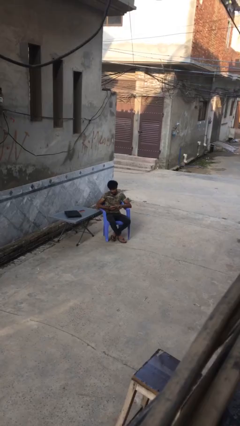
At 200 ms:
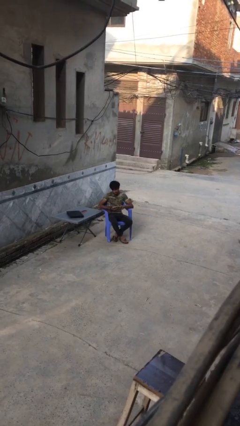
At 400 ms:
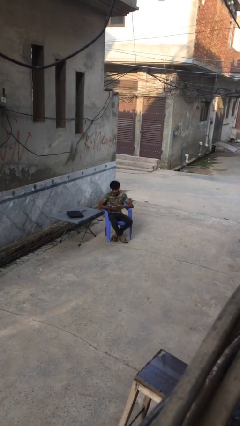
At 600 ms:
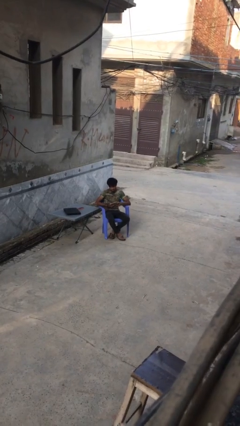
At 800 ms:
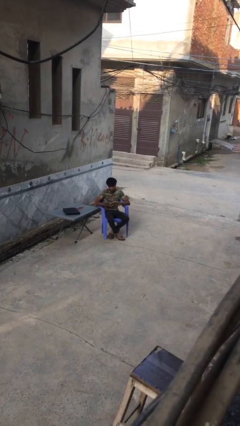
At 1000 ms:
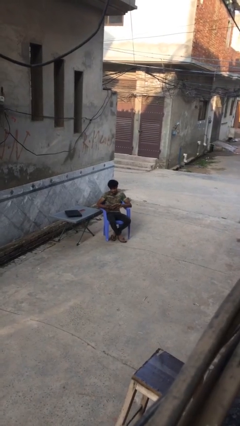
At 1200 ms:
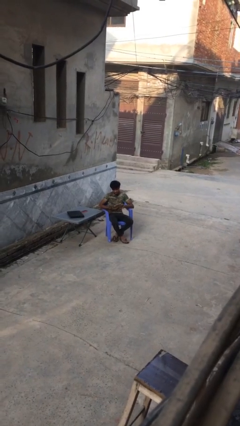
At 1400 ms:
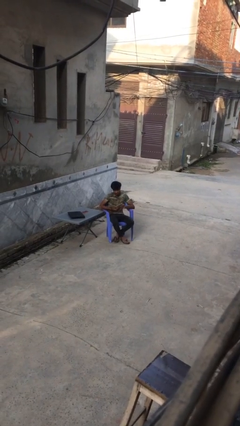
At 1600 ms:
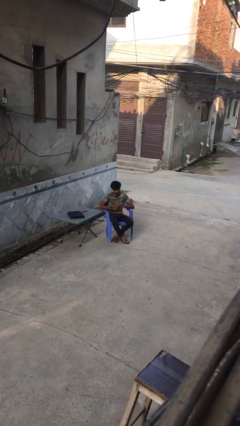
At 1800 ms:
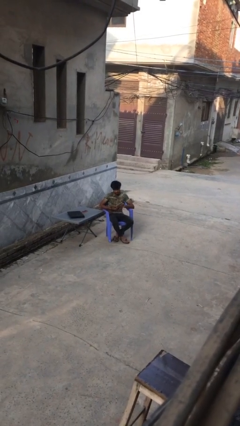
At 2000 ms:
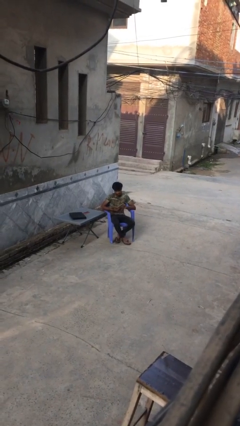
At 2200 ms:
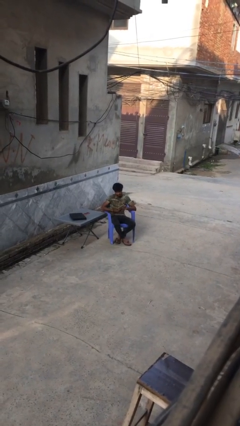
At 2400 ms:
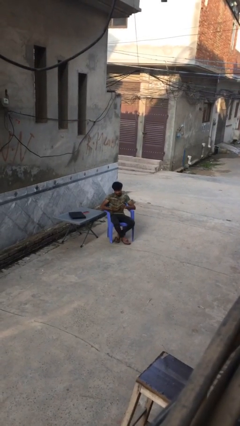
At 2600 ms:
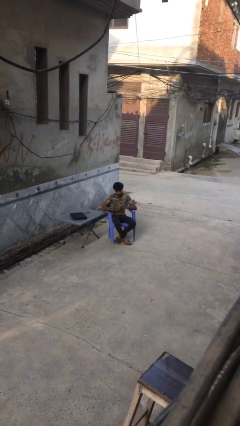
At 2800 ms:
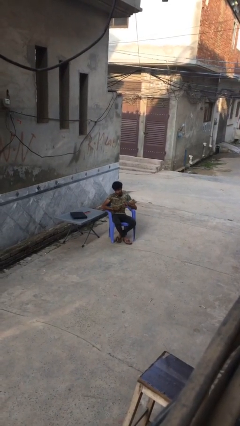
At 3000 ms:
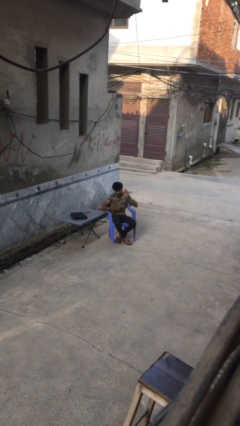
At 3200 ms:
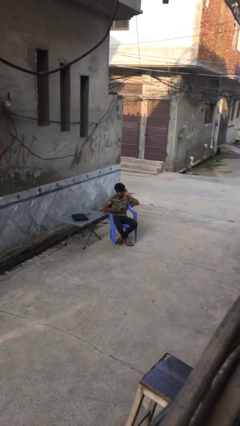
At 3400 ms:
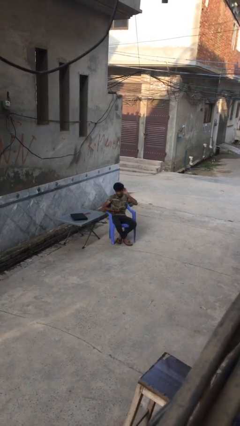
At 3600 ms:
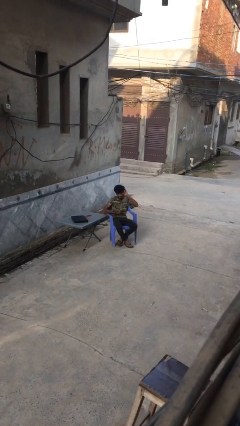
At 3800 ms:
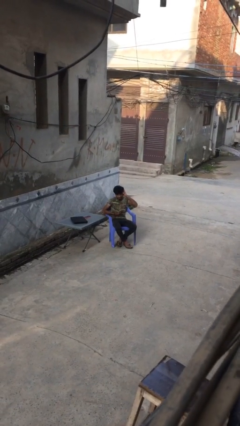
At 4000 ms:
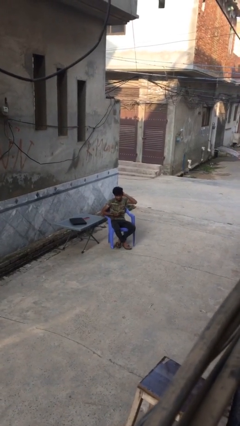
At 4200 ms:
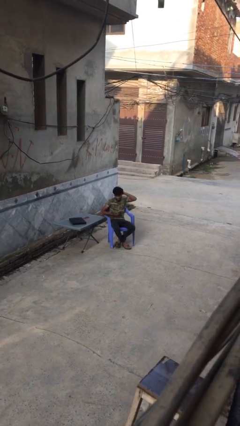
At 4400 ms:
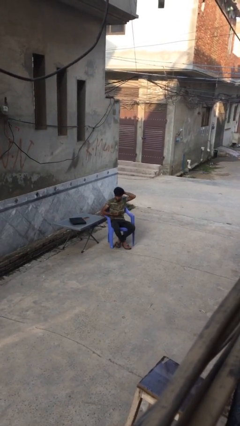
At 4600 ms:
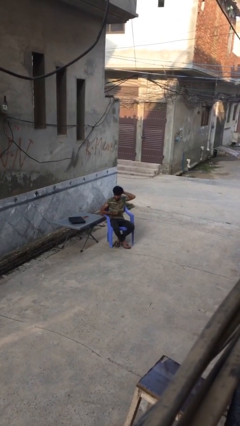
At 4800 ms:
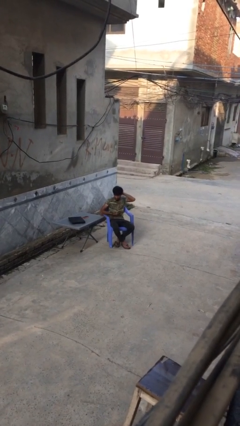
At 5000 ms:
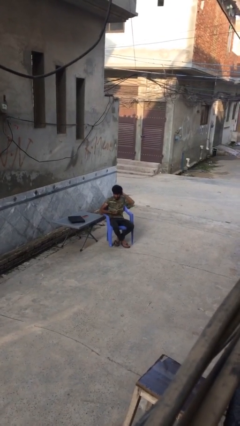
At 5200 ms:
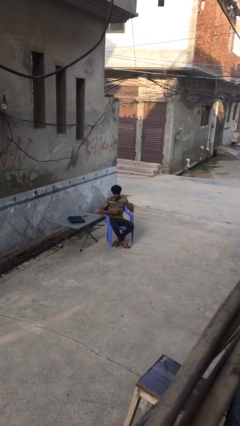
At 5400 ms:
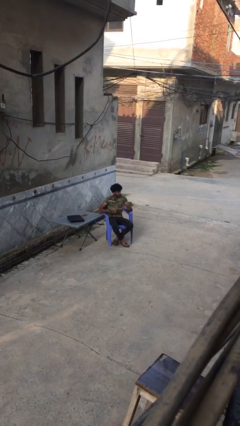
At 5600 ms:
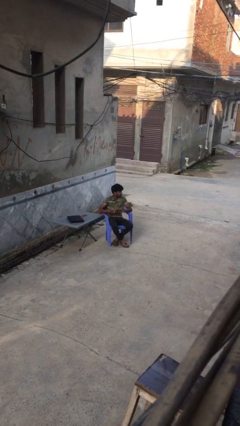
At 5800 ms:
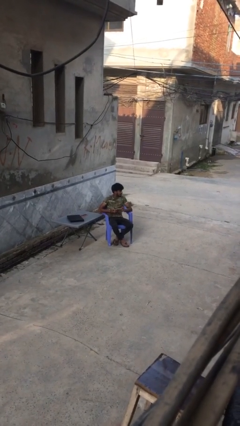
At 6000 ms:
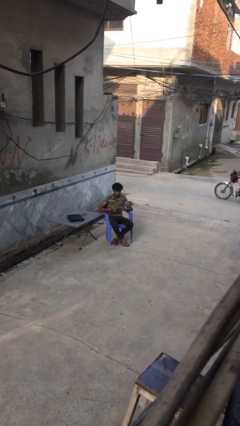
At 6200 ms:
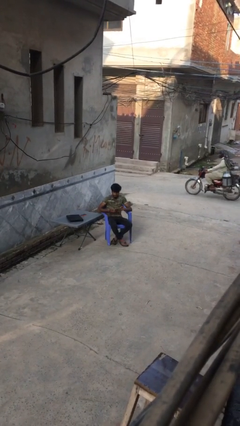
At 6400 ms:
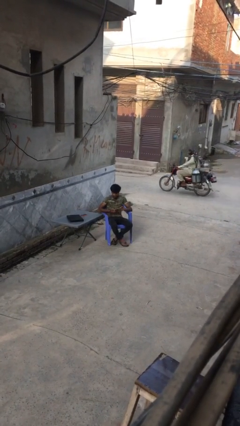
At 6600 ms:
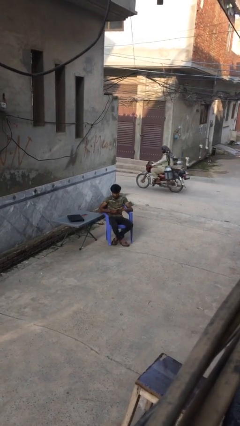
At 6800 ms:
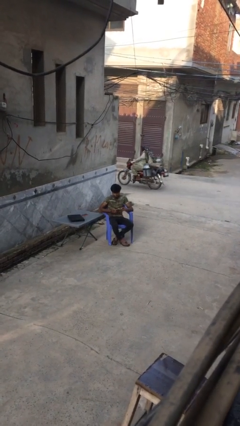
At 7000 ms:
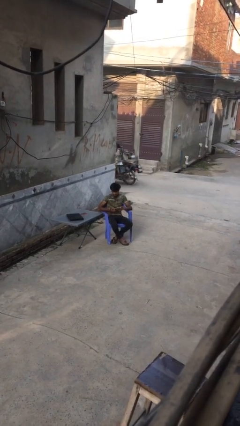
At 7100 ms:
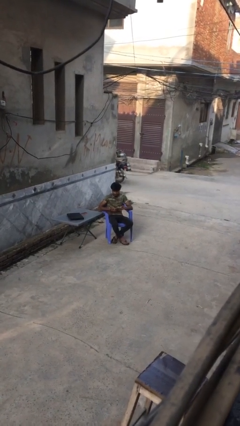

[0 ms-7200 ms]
person reads document

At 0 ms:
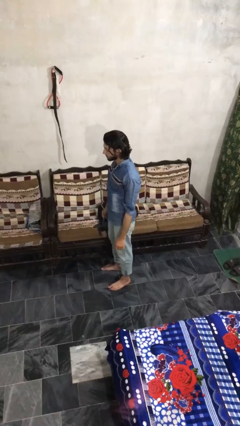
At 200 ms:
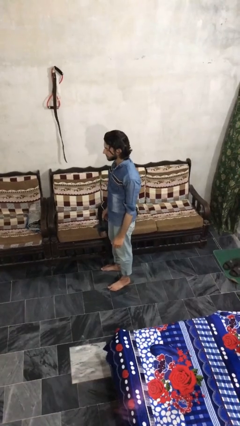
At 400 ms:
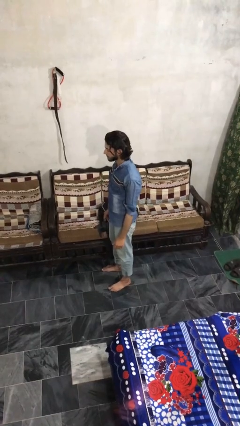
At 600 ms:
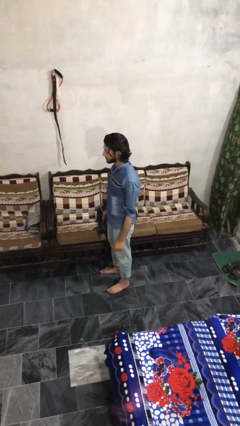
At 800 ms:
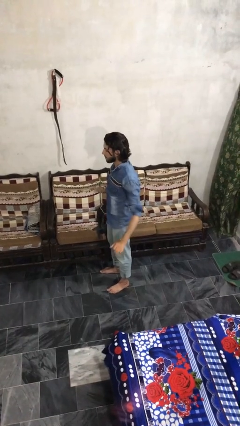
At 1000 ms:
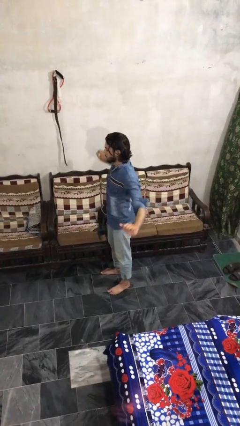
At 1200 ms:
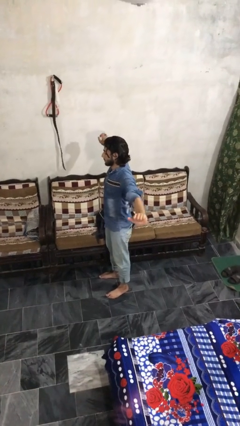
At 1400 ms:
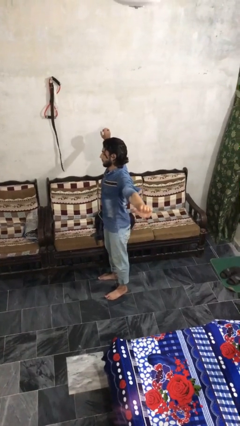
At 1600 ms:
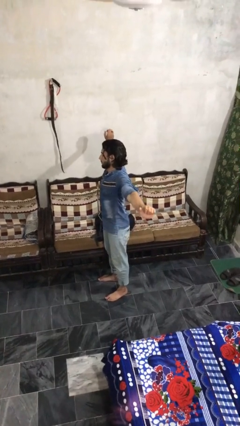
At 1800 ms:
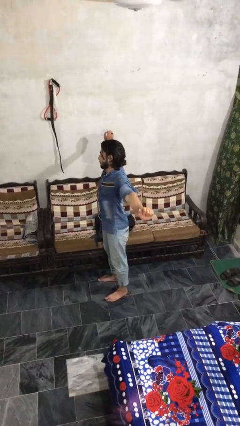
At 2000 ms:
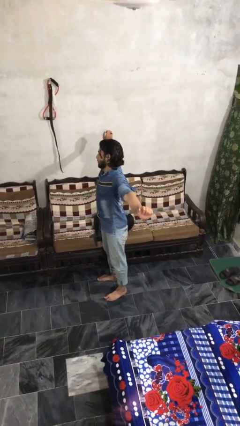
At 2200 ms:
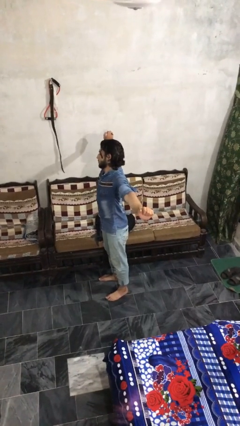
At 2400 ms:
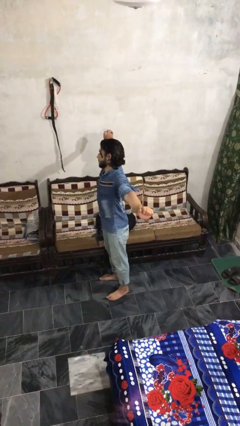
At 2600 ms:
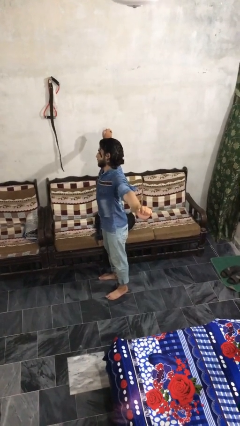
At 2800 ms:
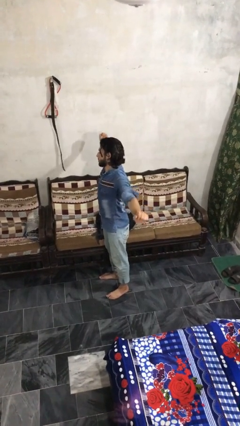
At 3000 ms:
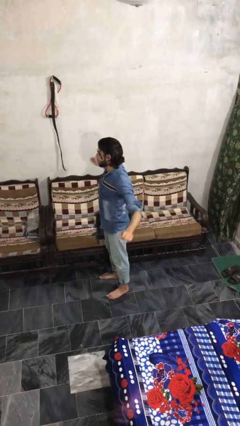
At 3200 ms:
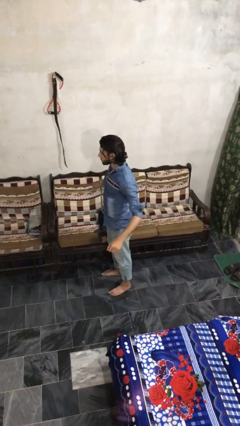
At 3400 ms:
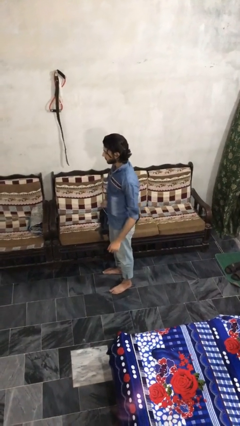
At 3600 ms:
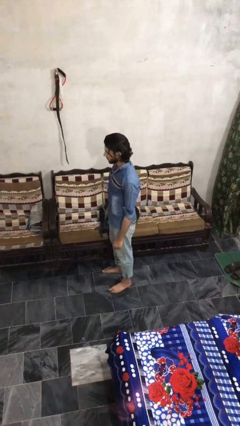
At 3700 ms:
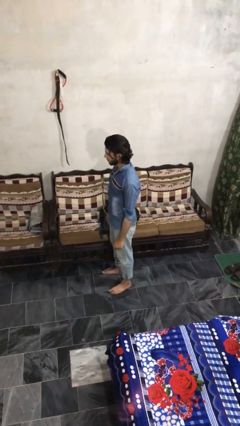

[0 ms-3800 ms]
person stretches arms to side

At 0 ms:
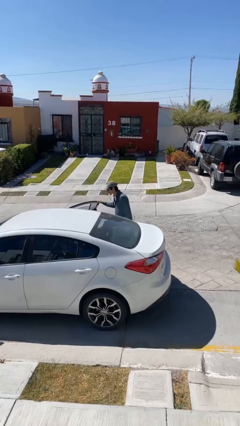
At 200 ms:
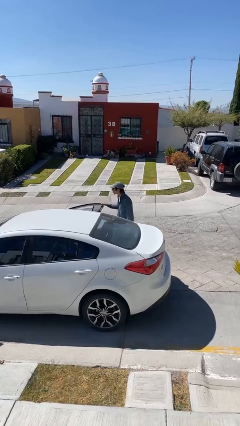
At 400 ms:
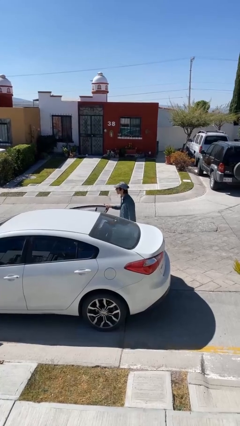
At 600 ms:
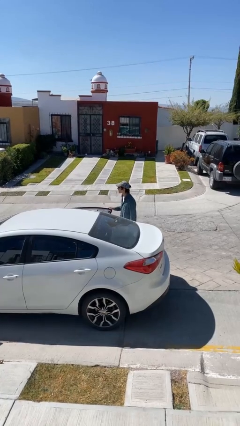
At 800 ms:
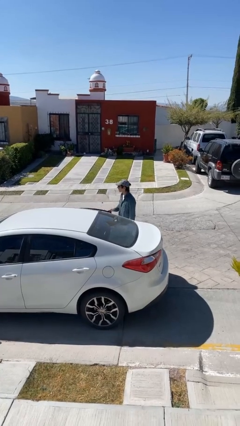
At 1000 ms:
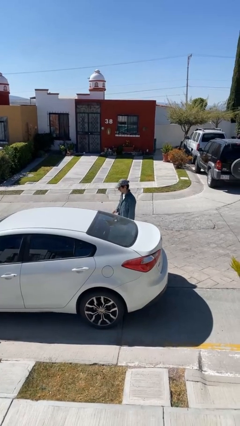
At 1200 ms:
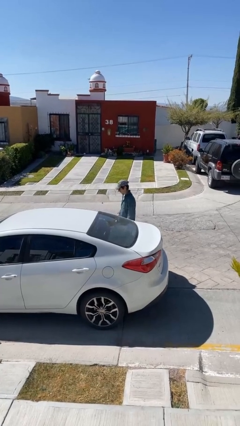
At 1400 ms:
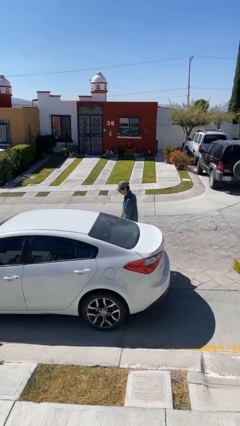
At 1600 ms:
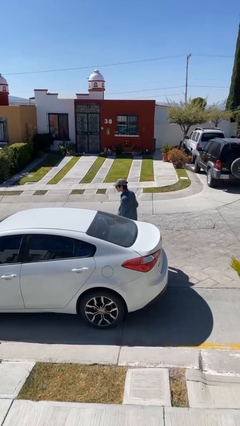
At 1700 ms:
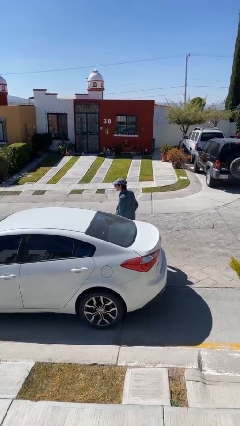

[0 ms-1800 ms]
person closes car door

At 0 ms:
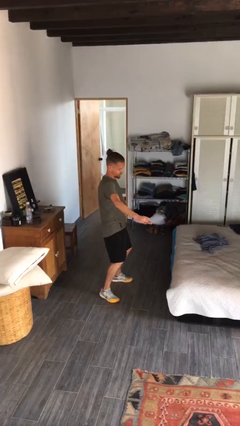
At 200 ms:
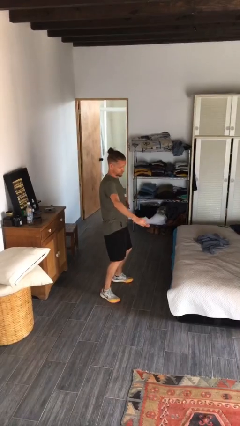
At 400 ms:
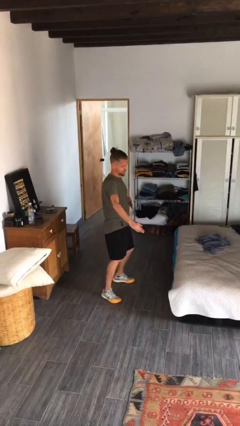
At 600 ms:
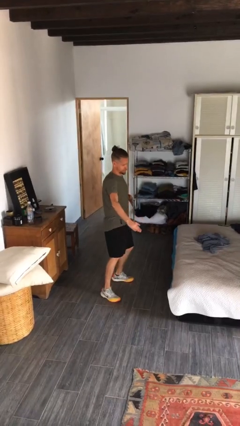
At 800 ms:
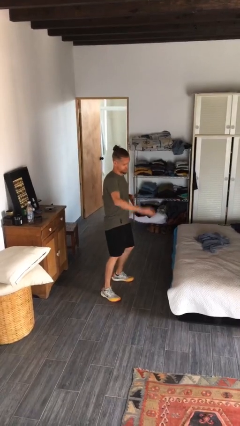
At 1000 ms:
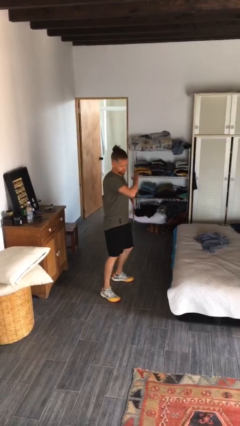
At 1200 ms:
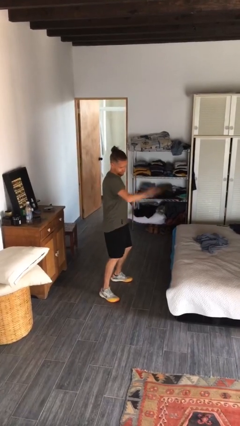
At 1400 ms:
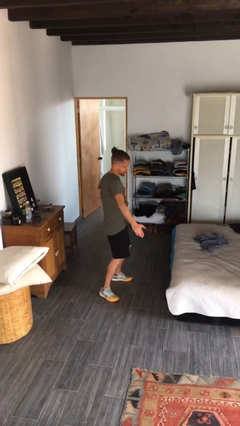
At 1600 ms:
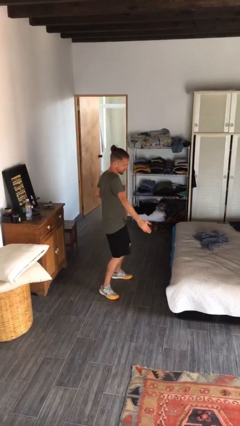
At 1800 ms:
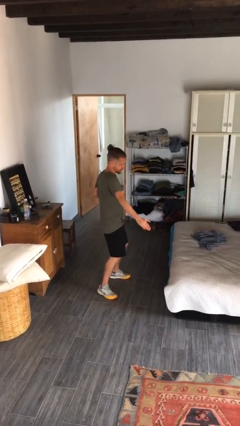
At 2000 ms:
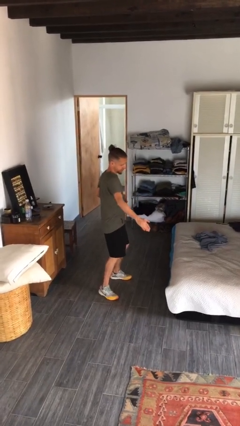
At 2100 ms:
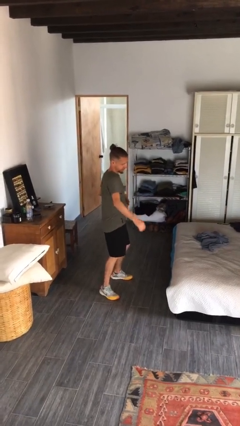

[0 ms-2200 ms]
person karate chop

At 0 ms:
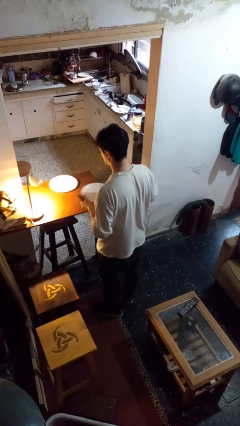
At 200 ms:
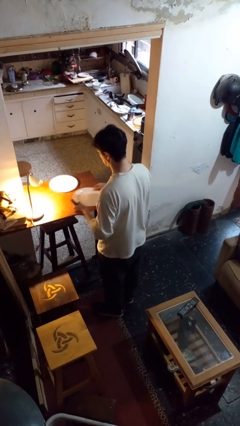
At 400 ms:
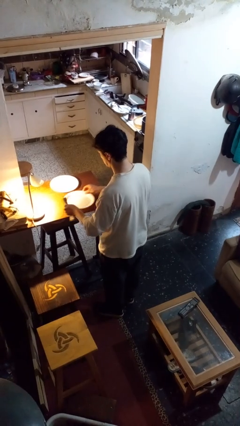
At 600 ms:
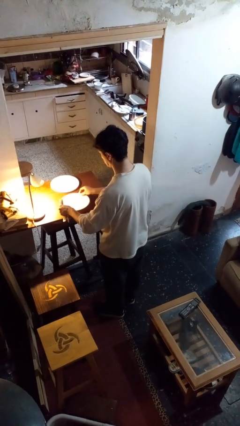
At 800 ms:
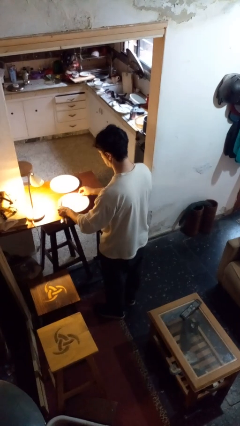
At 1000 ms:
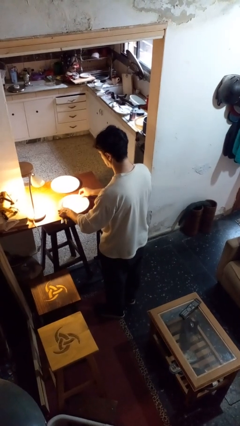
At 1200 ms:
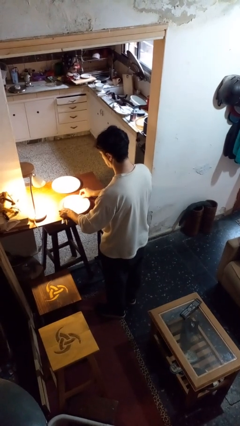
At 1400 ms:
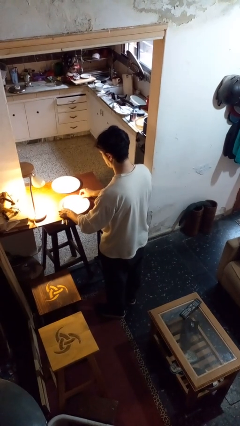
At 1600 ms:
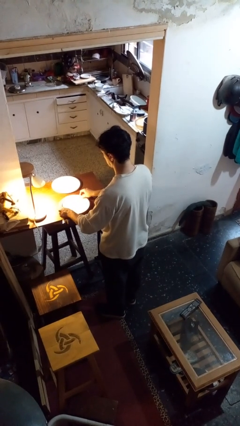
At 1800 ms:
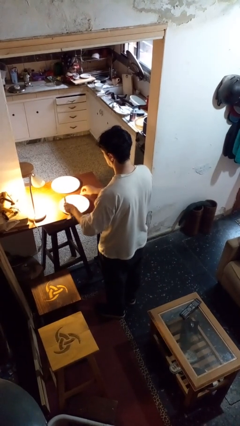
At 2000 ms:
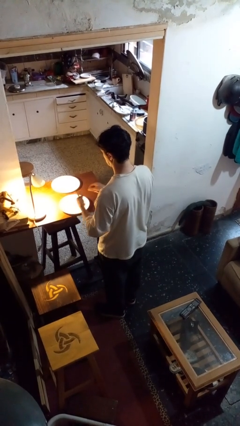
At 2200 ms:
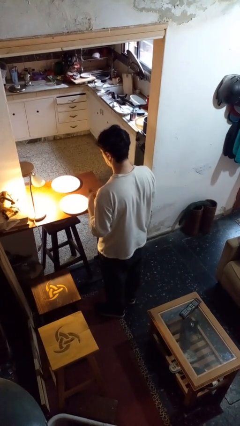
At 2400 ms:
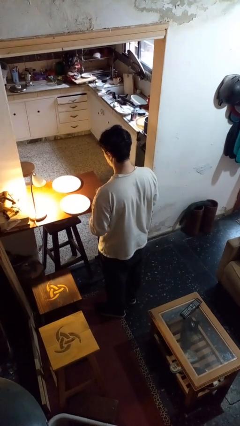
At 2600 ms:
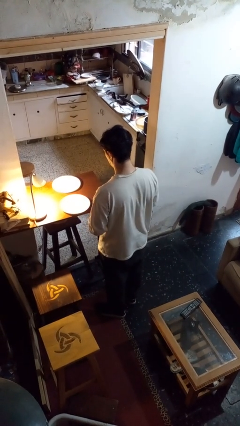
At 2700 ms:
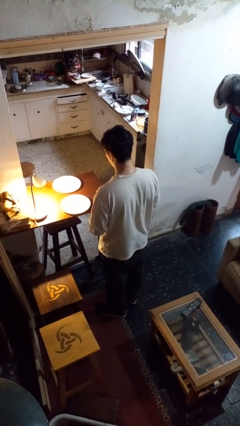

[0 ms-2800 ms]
person sets table
